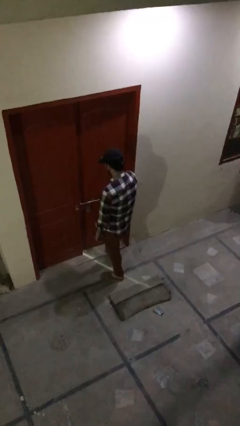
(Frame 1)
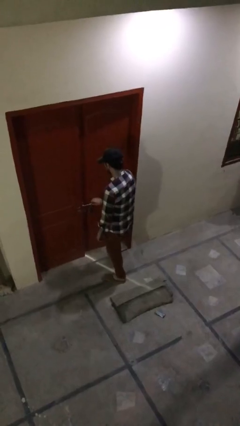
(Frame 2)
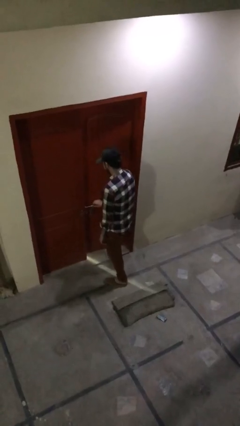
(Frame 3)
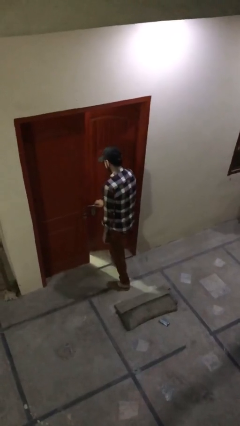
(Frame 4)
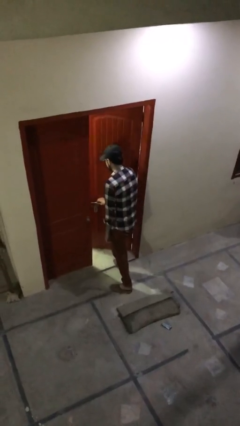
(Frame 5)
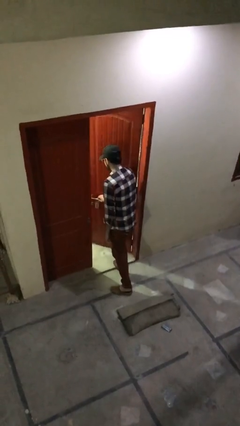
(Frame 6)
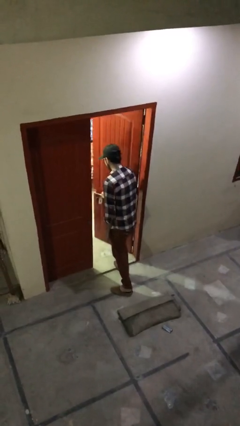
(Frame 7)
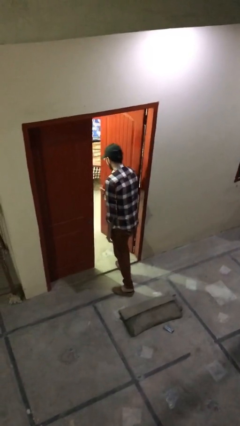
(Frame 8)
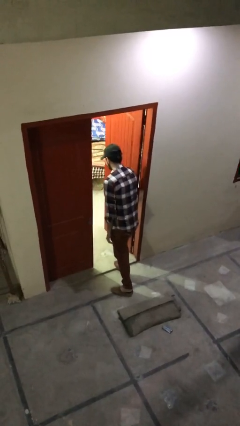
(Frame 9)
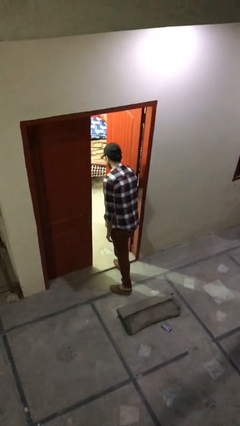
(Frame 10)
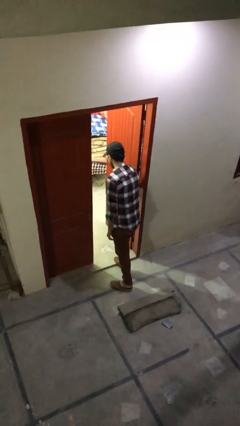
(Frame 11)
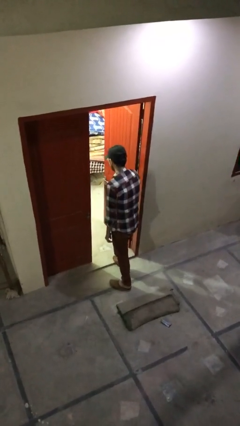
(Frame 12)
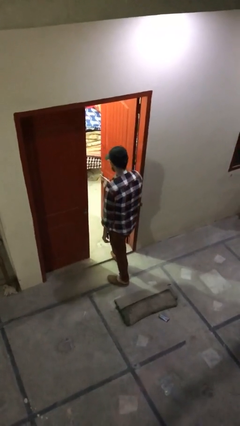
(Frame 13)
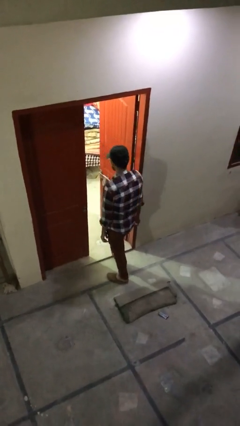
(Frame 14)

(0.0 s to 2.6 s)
person opens facility door

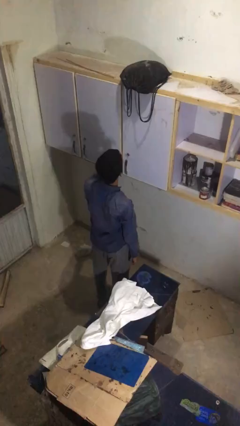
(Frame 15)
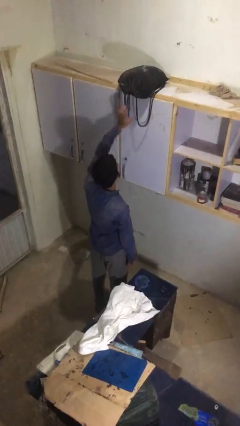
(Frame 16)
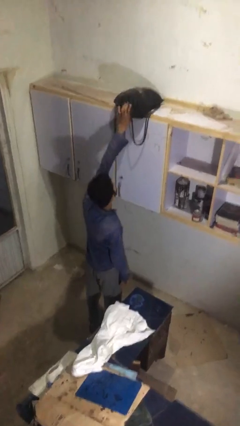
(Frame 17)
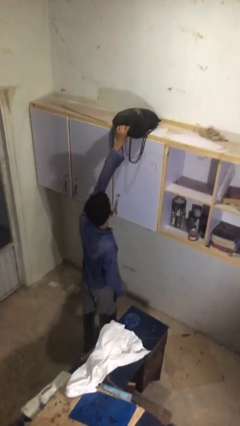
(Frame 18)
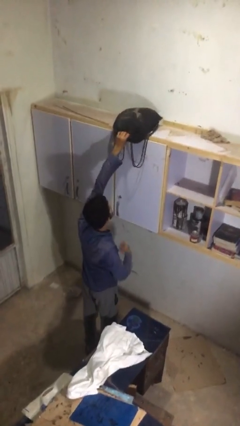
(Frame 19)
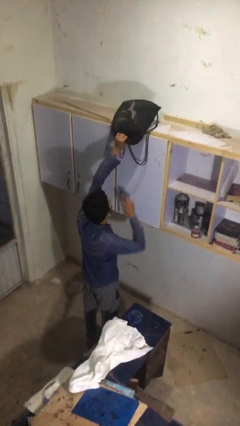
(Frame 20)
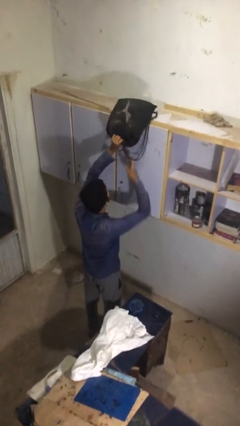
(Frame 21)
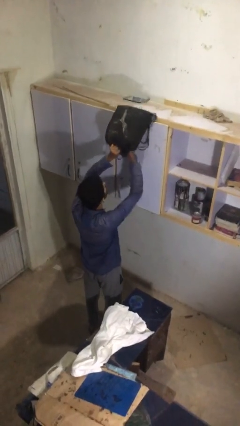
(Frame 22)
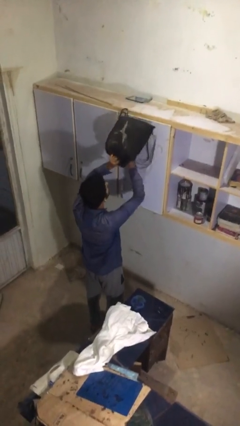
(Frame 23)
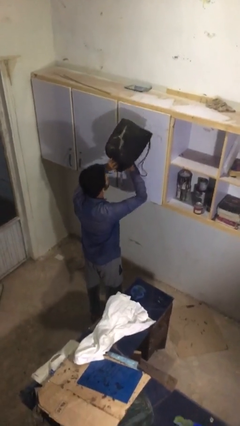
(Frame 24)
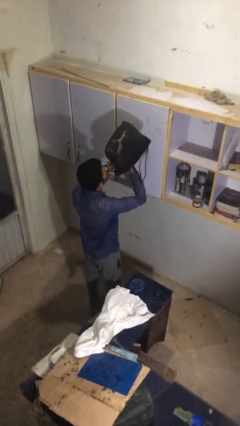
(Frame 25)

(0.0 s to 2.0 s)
person picks up object from shelf

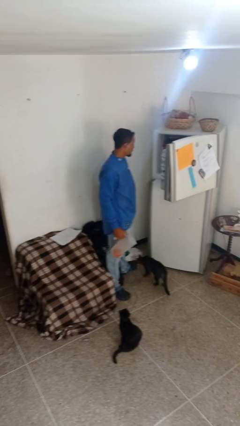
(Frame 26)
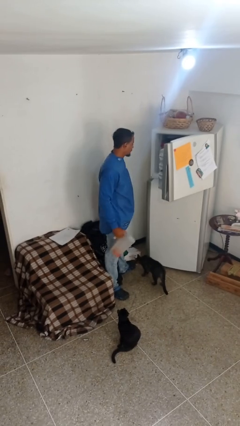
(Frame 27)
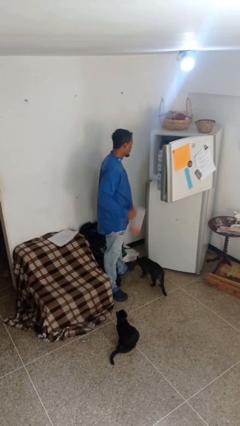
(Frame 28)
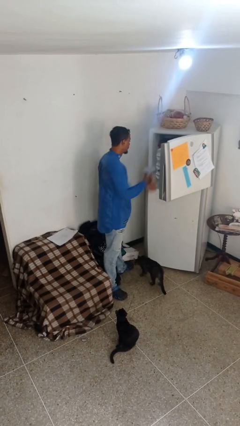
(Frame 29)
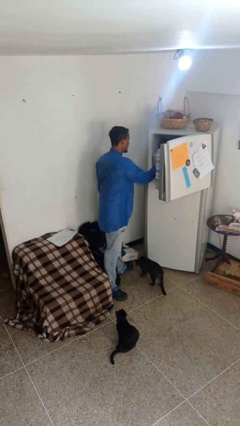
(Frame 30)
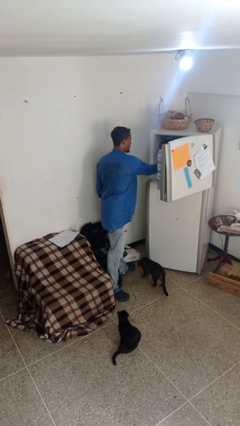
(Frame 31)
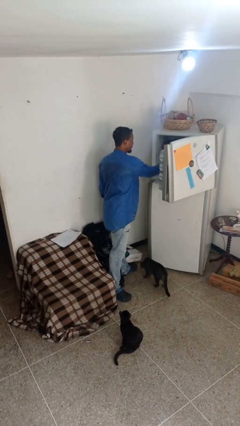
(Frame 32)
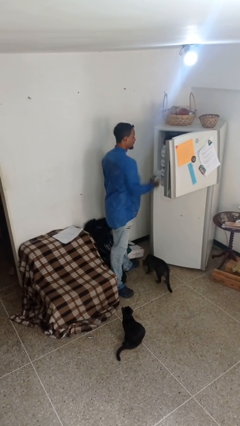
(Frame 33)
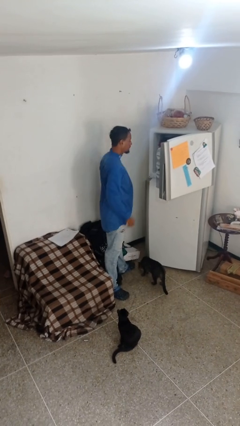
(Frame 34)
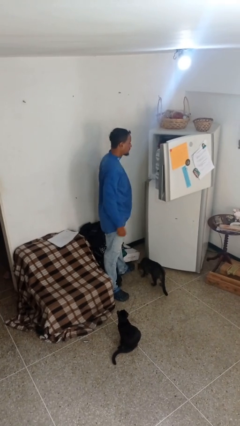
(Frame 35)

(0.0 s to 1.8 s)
person puts object into refrigerator

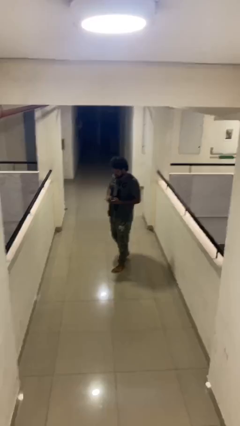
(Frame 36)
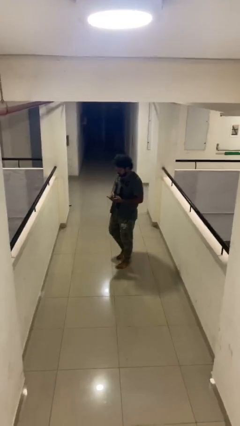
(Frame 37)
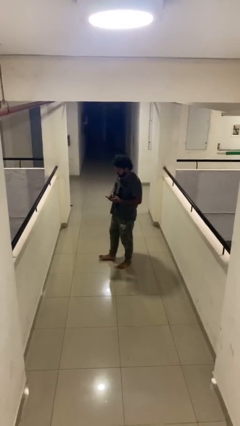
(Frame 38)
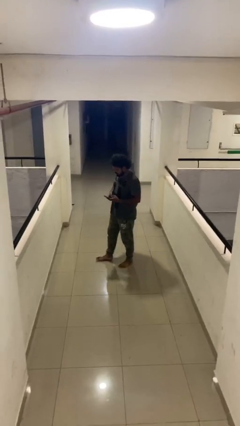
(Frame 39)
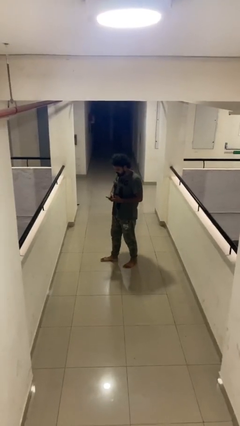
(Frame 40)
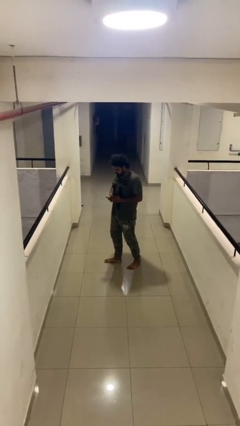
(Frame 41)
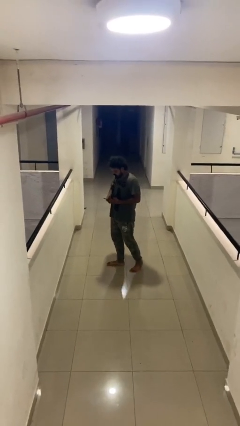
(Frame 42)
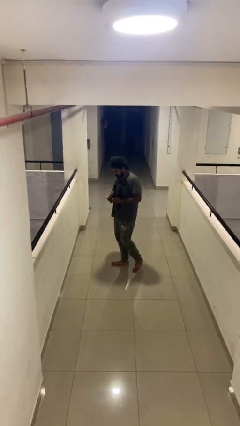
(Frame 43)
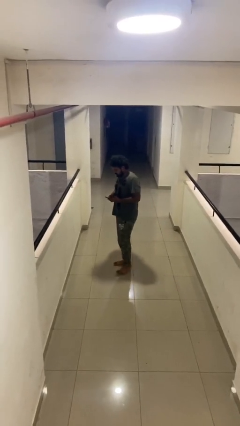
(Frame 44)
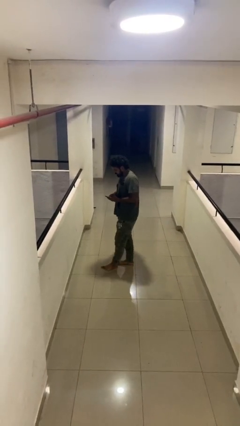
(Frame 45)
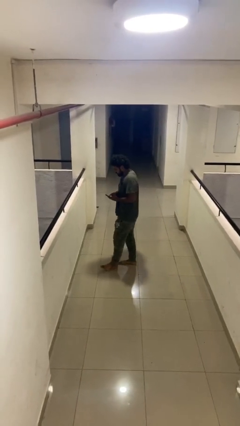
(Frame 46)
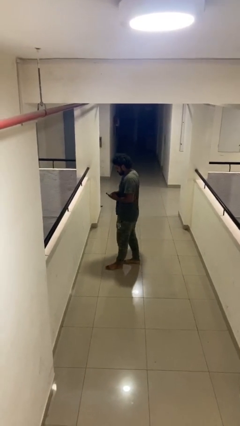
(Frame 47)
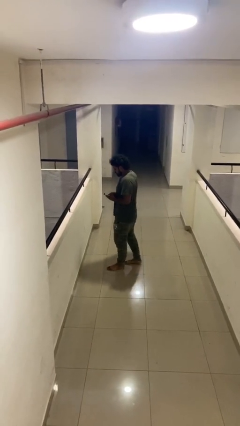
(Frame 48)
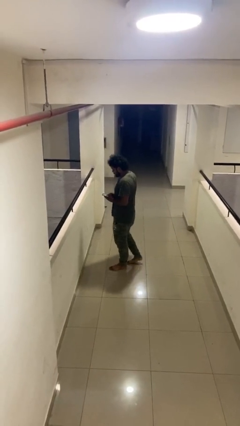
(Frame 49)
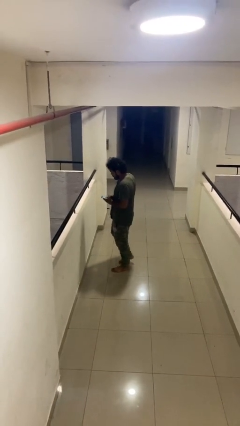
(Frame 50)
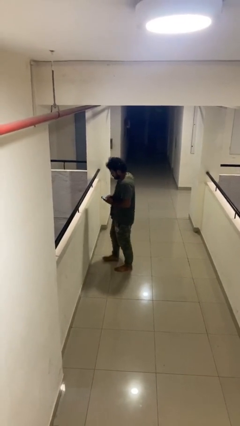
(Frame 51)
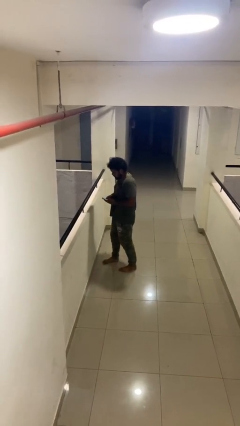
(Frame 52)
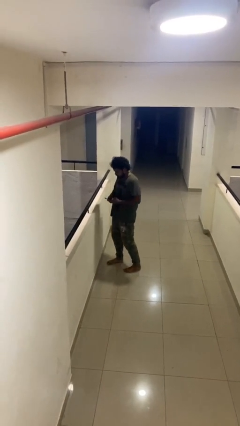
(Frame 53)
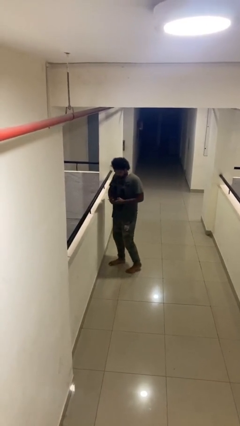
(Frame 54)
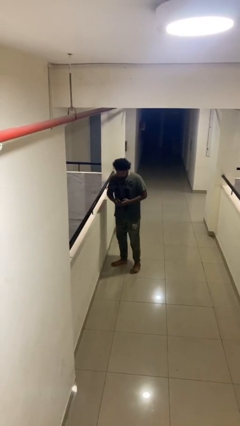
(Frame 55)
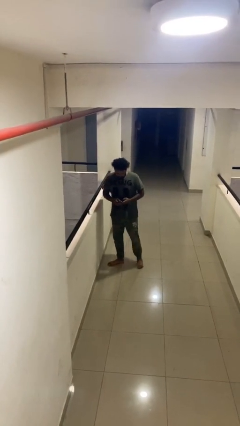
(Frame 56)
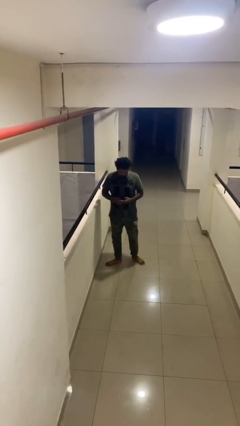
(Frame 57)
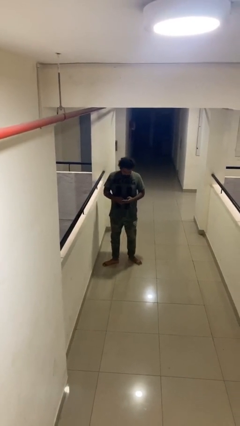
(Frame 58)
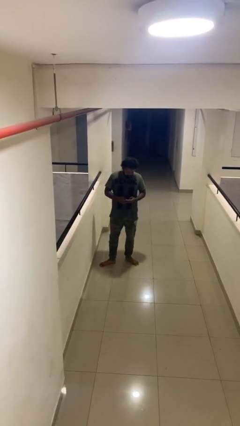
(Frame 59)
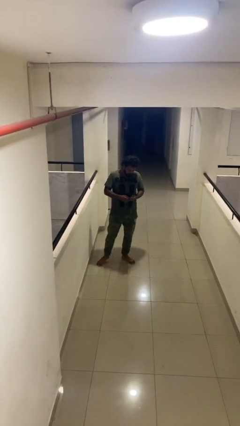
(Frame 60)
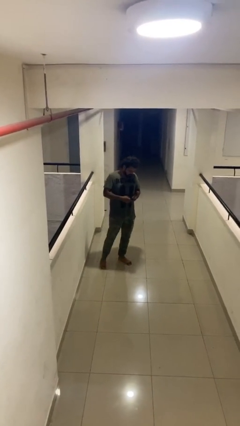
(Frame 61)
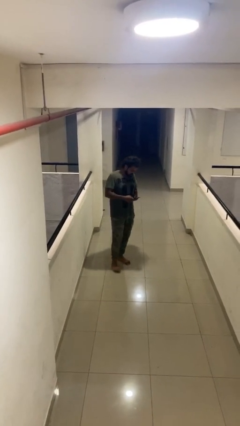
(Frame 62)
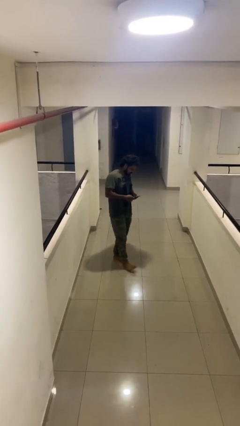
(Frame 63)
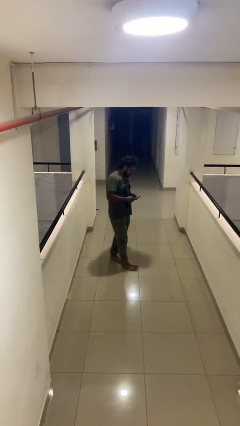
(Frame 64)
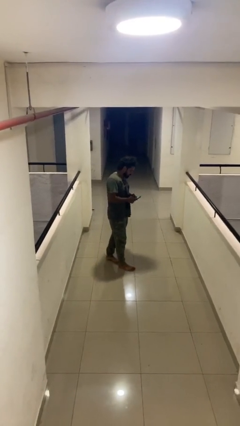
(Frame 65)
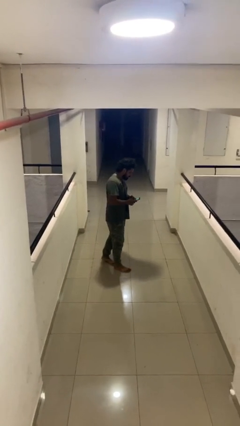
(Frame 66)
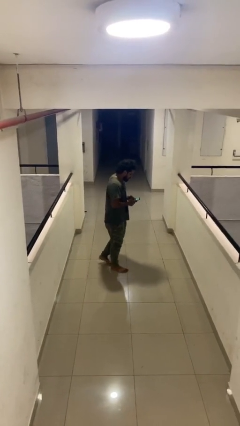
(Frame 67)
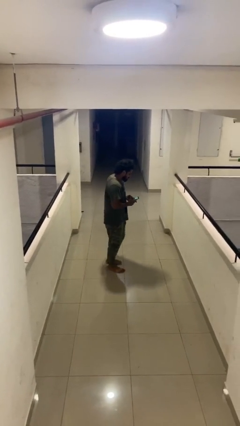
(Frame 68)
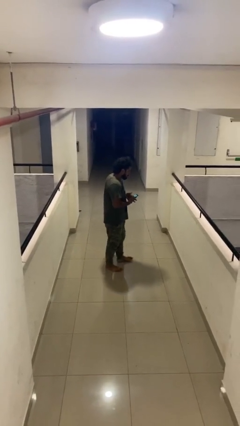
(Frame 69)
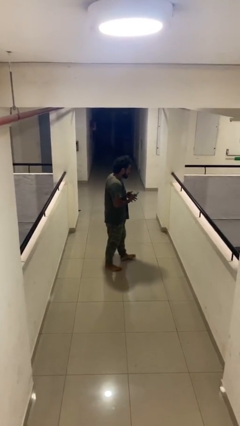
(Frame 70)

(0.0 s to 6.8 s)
person texts on phone

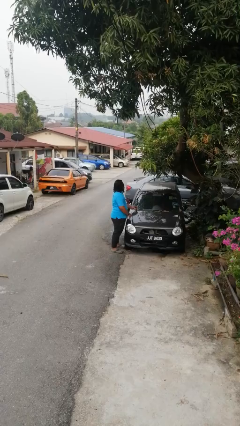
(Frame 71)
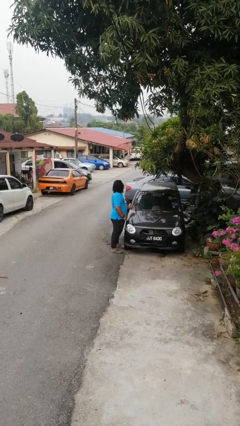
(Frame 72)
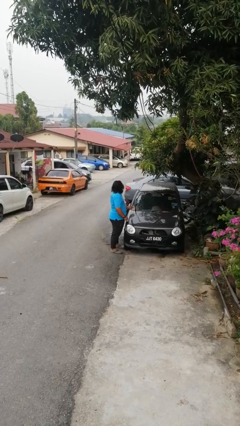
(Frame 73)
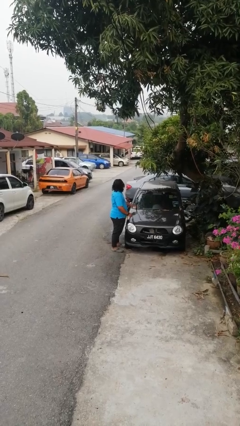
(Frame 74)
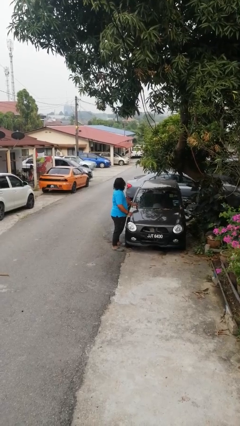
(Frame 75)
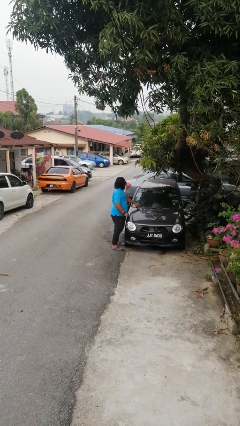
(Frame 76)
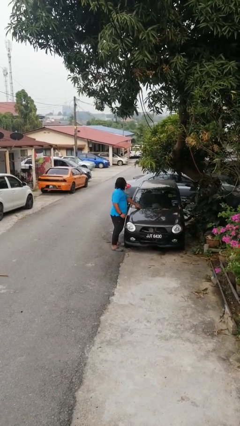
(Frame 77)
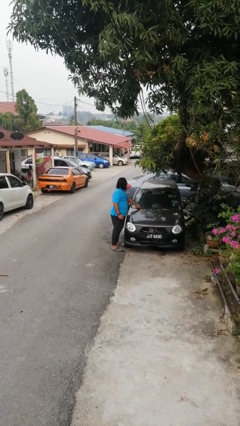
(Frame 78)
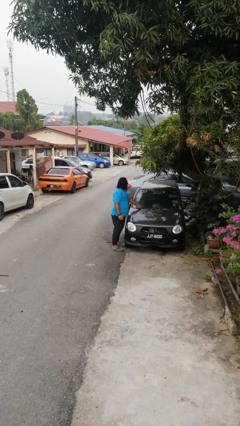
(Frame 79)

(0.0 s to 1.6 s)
person flips down car wipers

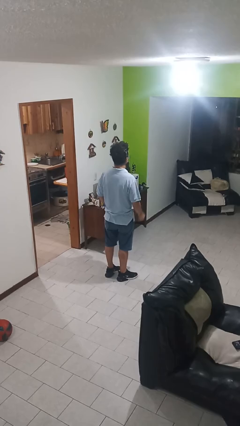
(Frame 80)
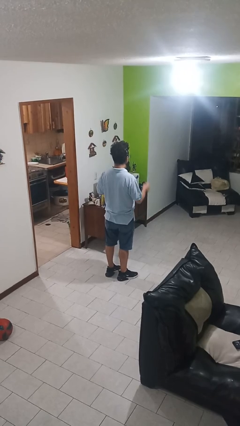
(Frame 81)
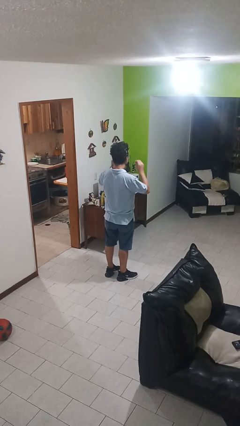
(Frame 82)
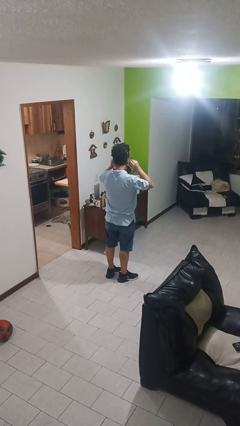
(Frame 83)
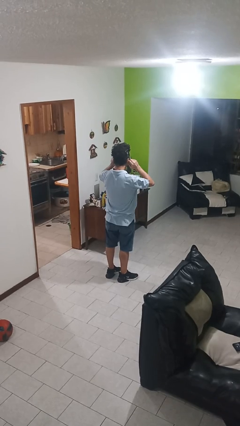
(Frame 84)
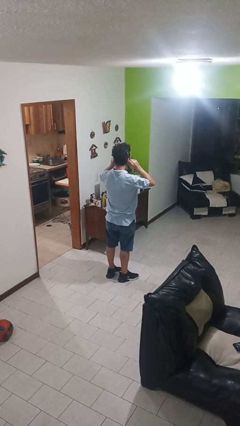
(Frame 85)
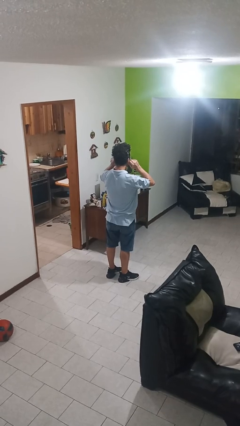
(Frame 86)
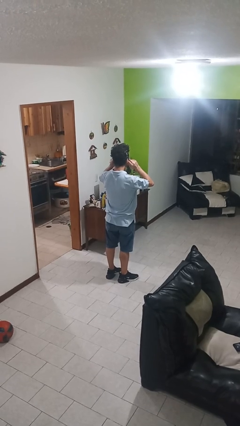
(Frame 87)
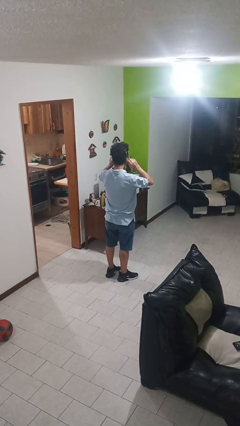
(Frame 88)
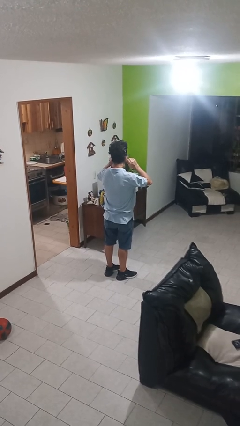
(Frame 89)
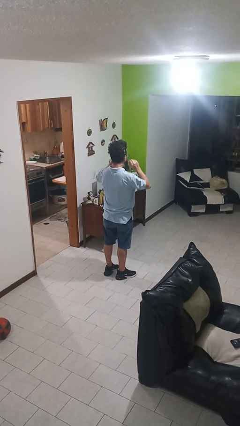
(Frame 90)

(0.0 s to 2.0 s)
person touches earlobe

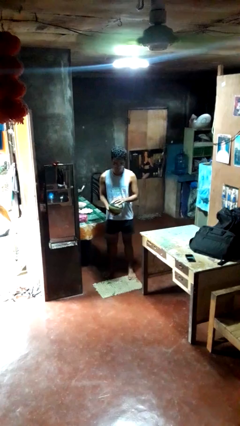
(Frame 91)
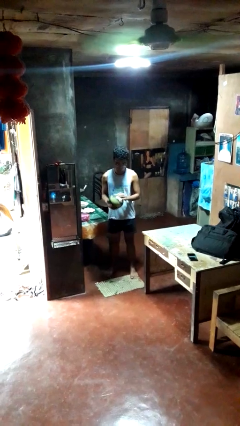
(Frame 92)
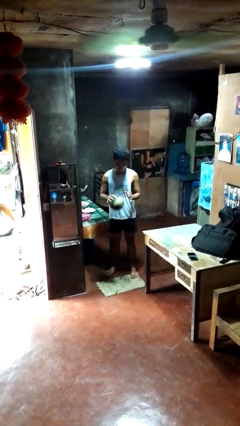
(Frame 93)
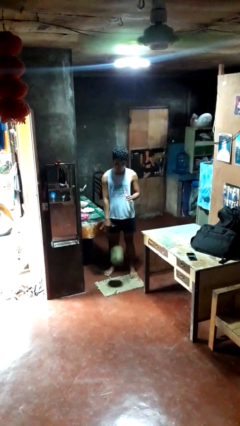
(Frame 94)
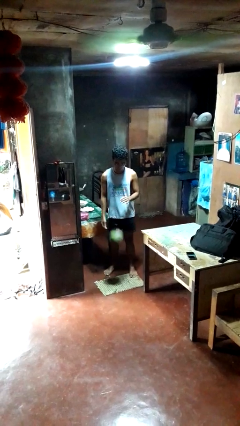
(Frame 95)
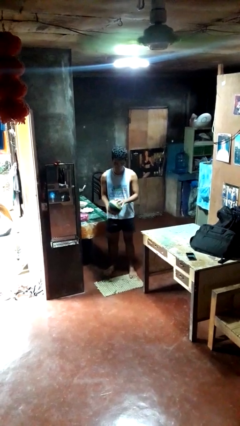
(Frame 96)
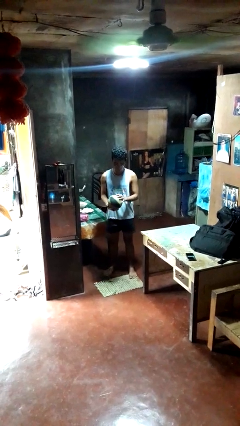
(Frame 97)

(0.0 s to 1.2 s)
person bounces ball on floor
